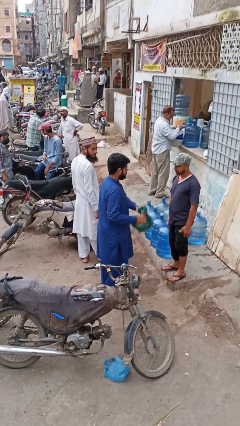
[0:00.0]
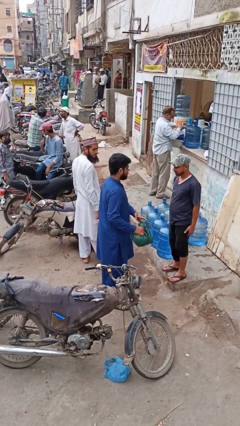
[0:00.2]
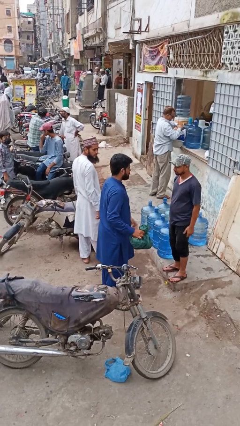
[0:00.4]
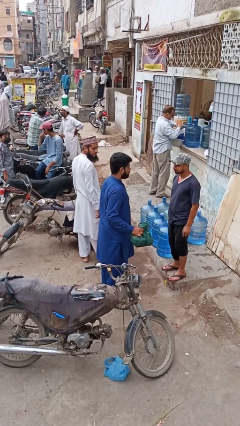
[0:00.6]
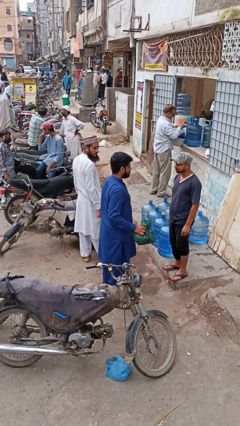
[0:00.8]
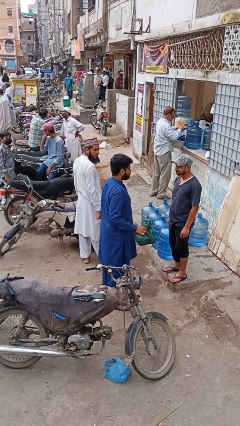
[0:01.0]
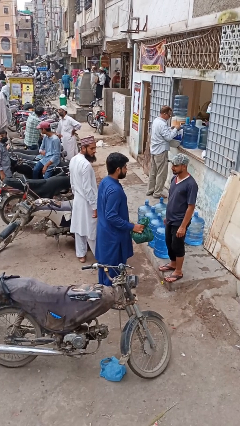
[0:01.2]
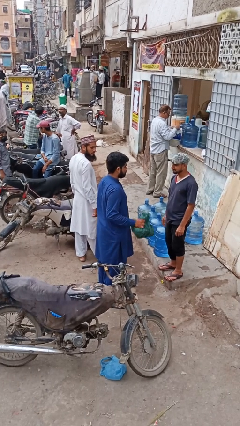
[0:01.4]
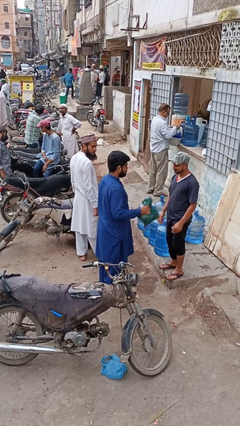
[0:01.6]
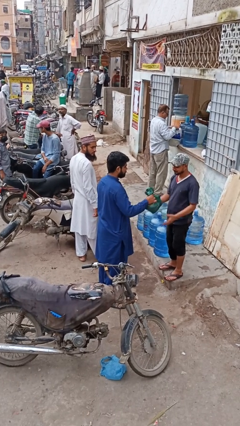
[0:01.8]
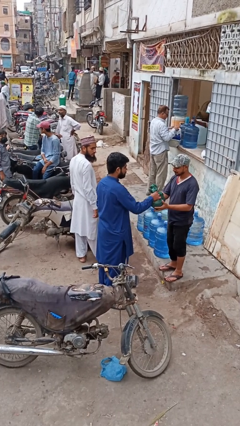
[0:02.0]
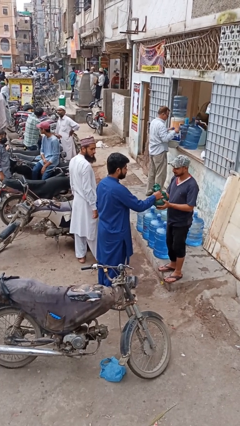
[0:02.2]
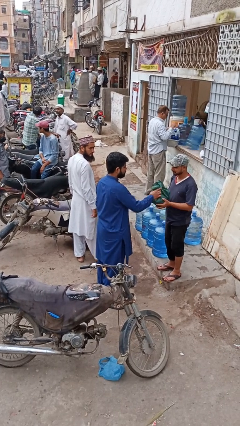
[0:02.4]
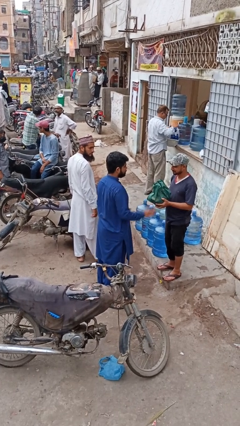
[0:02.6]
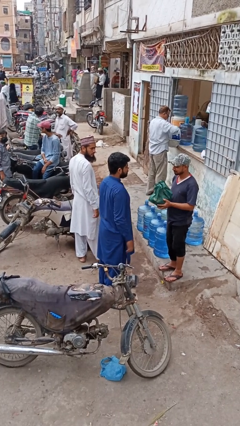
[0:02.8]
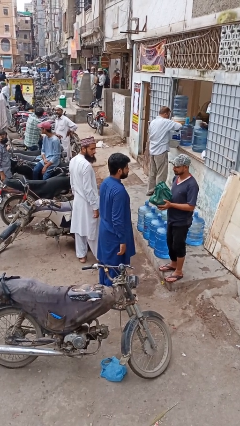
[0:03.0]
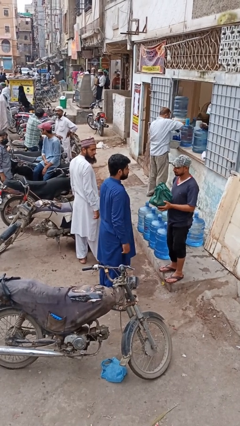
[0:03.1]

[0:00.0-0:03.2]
person transfers object to person

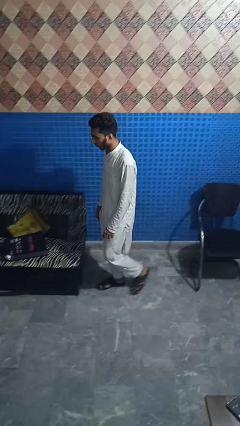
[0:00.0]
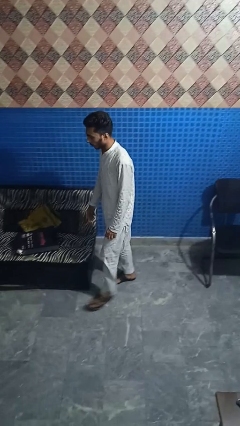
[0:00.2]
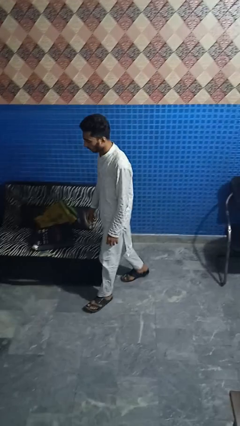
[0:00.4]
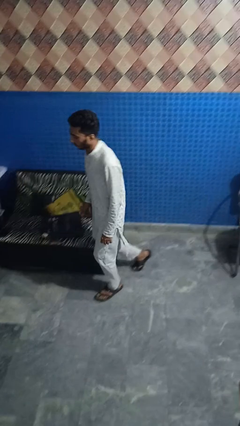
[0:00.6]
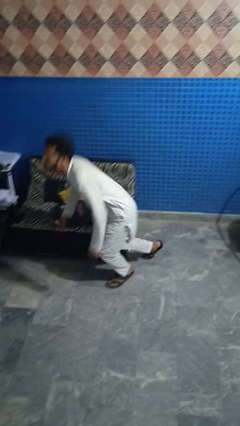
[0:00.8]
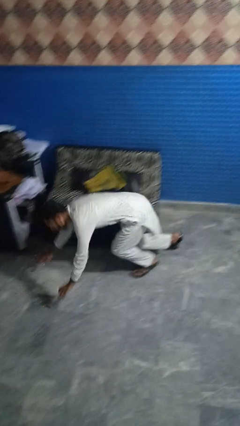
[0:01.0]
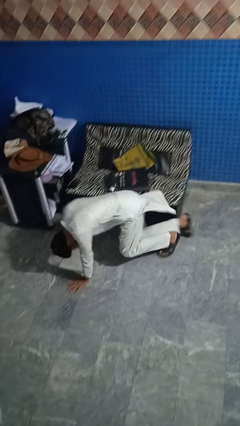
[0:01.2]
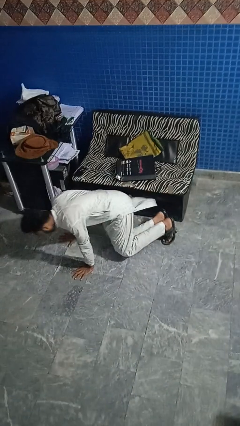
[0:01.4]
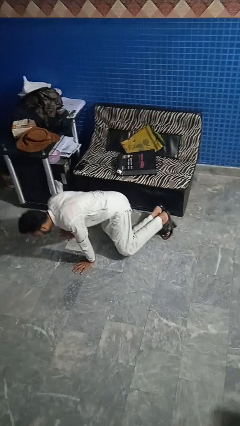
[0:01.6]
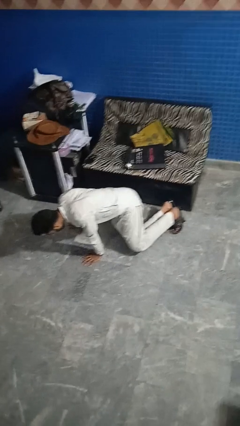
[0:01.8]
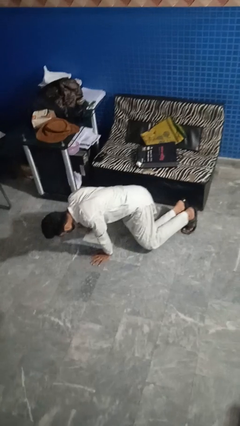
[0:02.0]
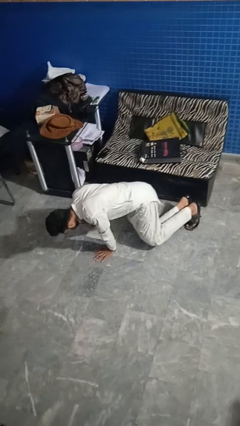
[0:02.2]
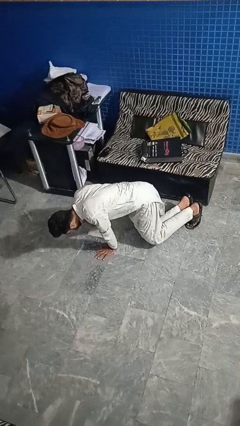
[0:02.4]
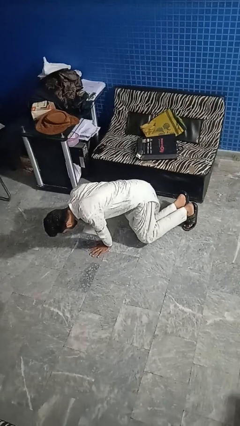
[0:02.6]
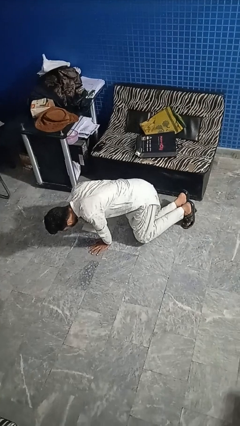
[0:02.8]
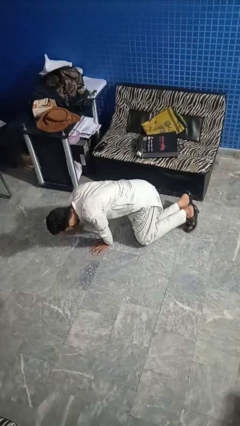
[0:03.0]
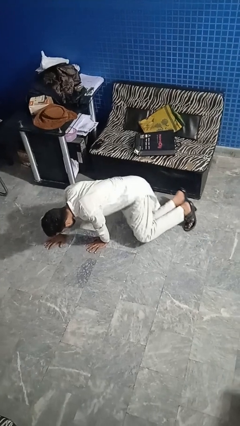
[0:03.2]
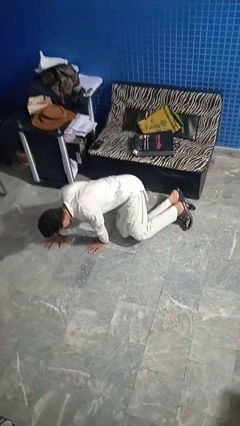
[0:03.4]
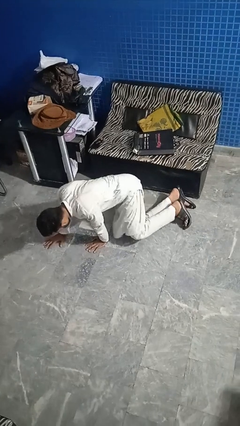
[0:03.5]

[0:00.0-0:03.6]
person trips on object on floor

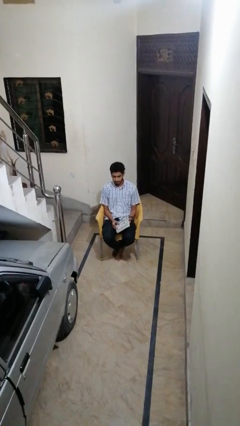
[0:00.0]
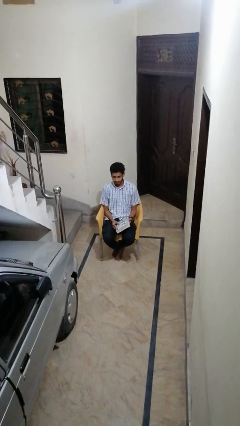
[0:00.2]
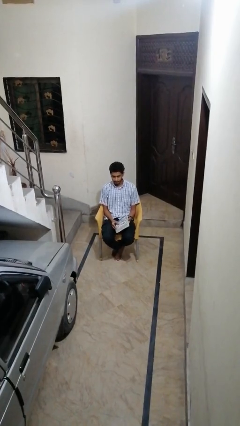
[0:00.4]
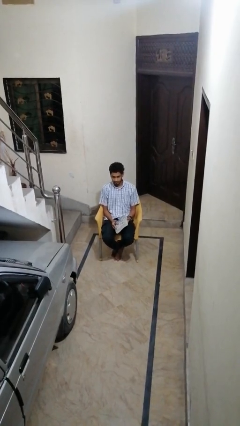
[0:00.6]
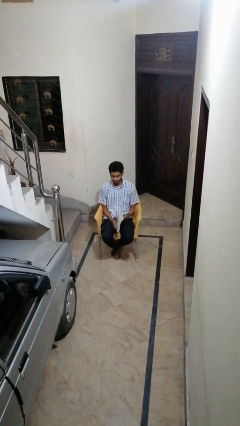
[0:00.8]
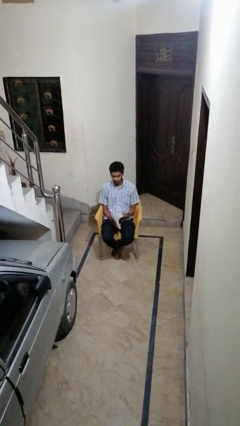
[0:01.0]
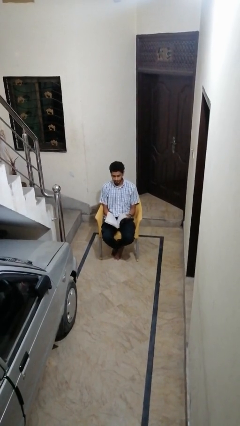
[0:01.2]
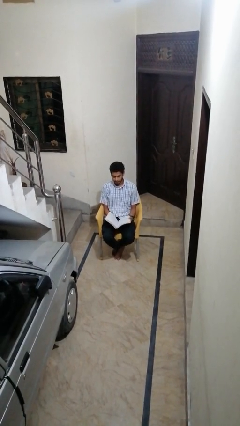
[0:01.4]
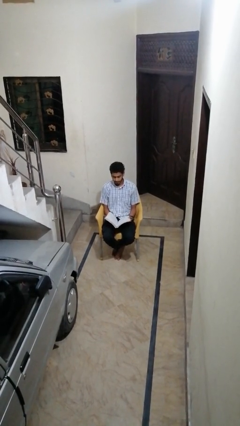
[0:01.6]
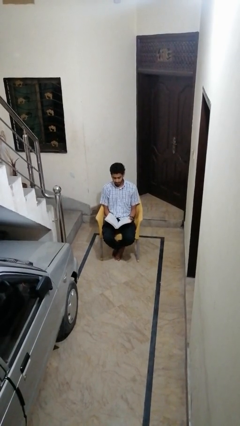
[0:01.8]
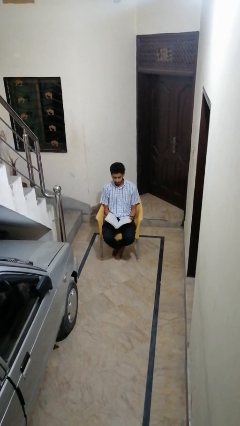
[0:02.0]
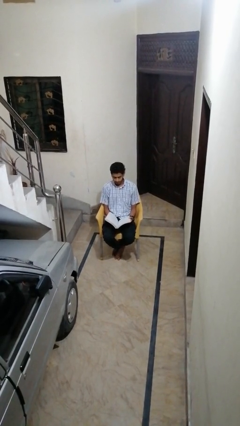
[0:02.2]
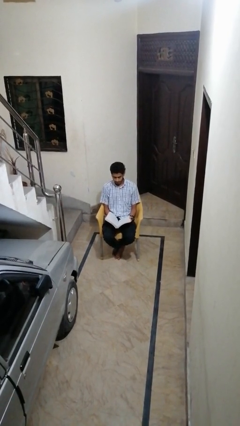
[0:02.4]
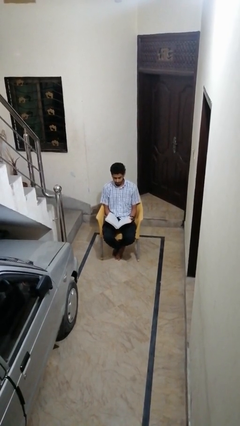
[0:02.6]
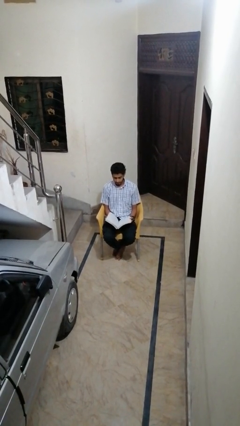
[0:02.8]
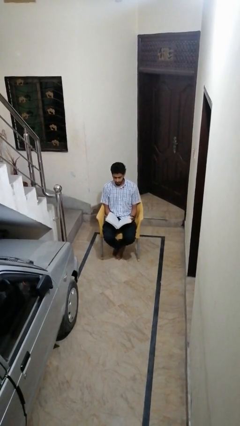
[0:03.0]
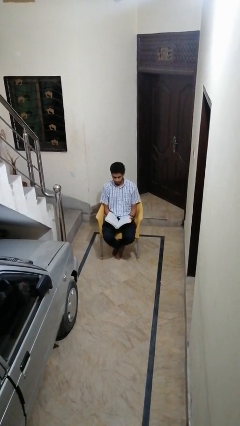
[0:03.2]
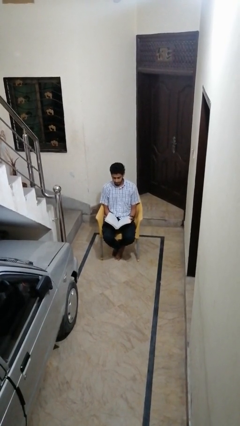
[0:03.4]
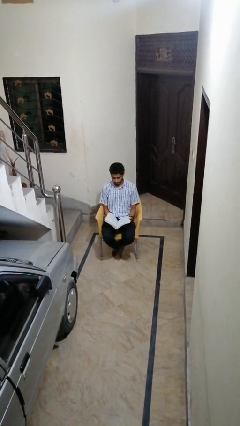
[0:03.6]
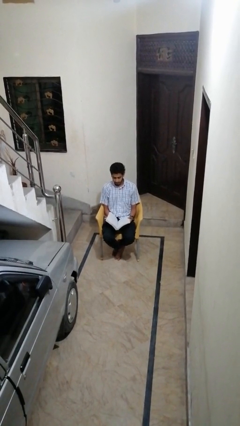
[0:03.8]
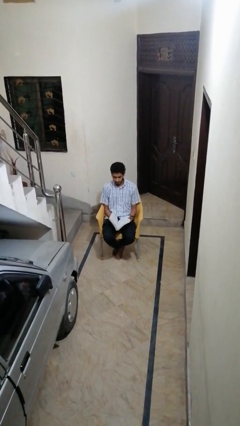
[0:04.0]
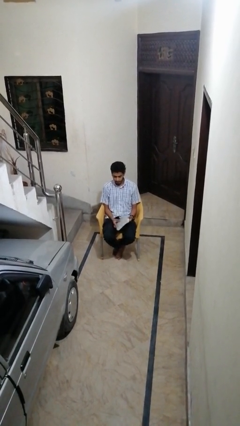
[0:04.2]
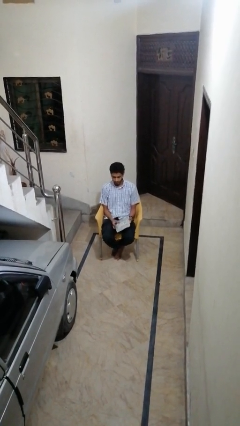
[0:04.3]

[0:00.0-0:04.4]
person reads book

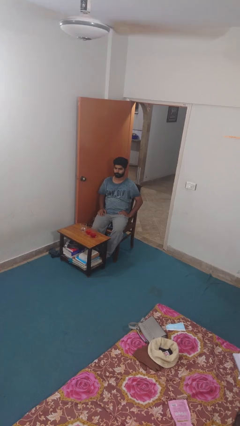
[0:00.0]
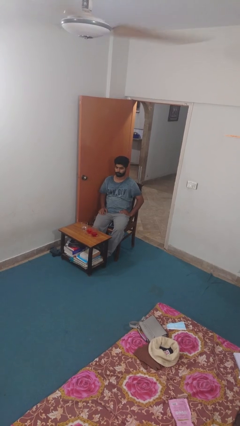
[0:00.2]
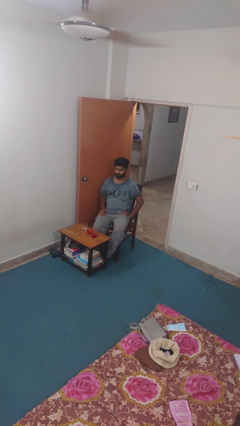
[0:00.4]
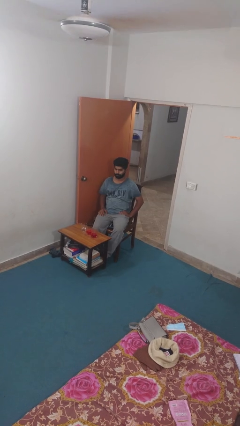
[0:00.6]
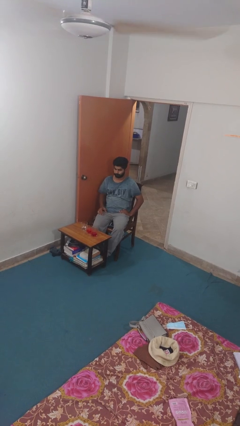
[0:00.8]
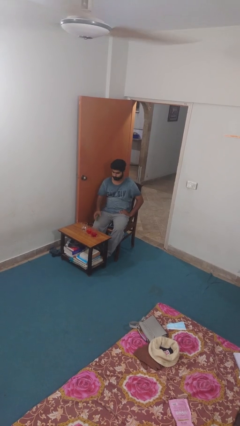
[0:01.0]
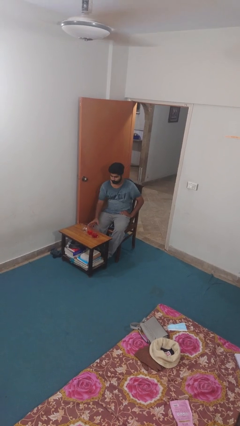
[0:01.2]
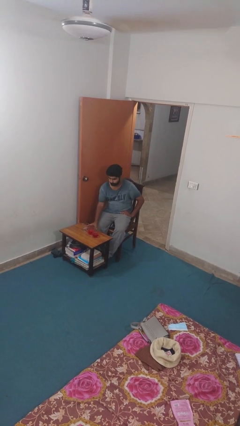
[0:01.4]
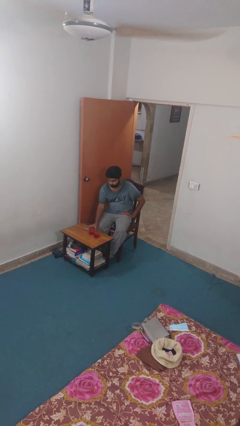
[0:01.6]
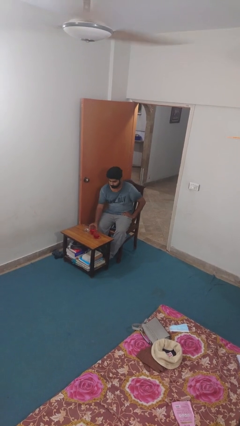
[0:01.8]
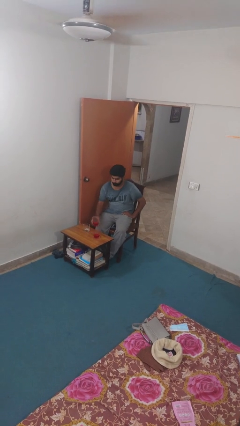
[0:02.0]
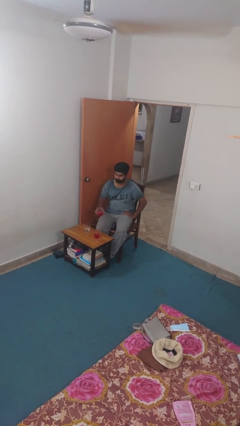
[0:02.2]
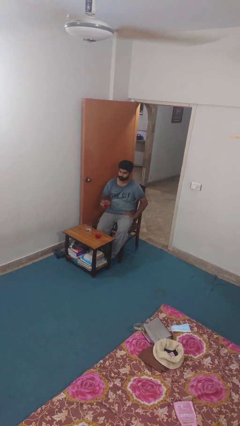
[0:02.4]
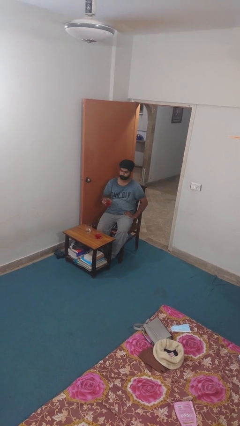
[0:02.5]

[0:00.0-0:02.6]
person picks up object from table

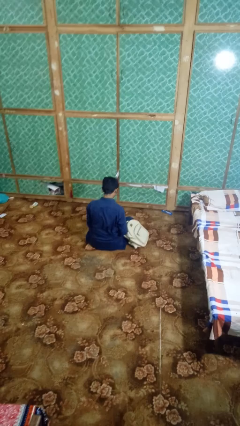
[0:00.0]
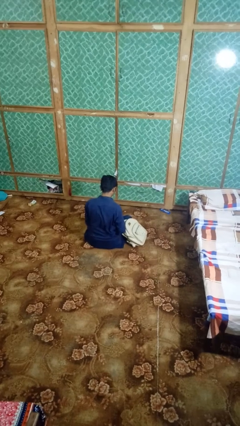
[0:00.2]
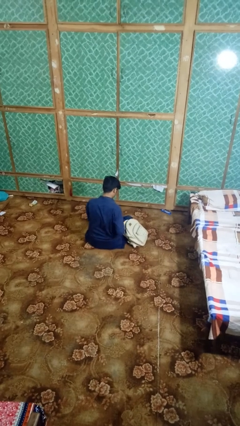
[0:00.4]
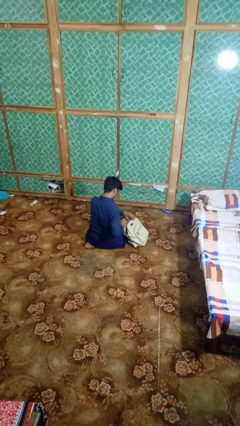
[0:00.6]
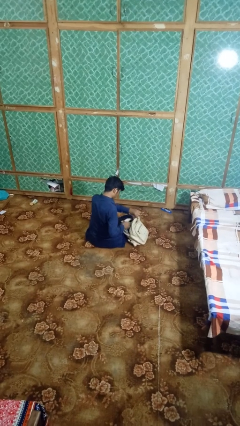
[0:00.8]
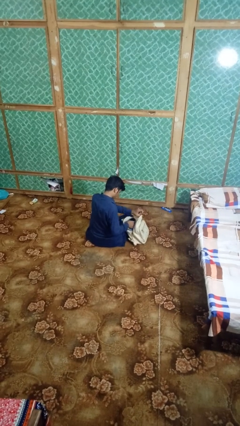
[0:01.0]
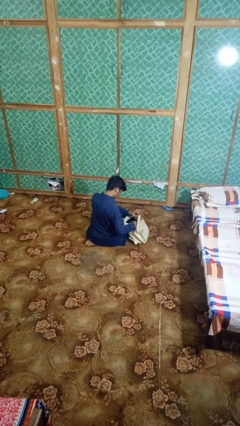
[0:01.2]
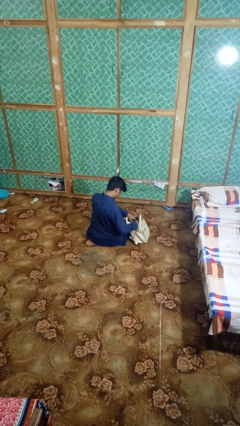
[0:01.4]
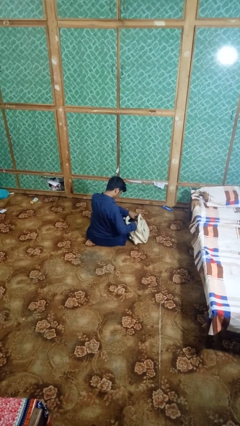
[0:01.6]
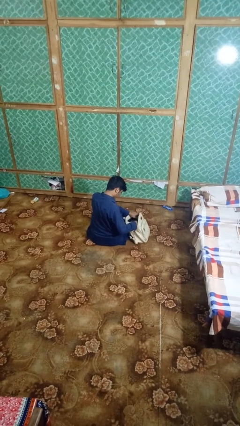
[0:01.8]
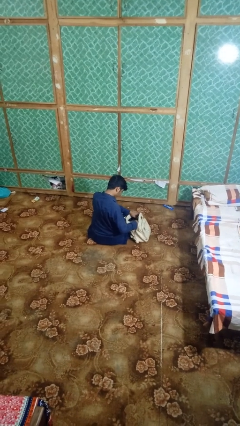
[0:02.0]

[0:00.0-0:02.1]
person searches in backpack

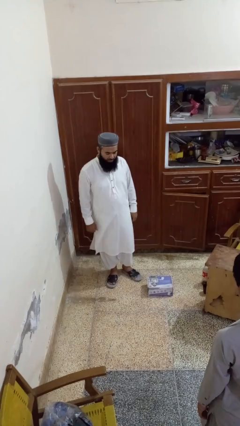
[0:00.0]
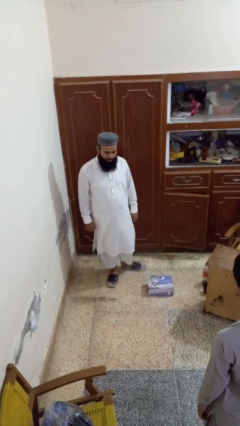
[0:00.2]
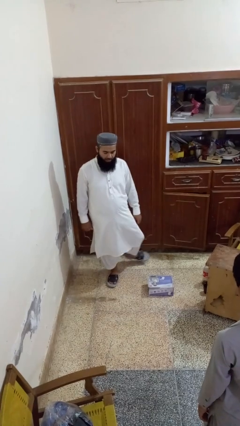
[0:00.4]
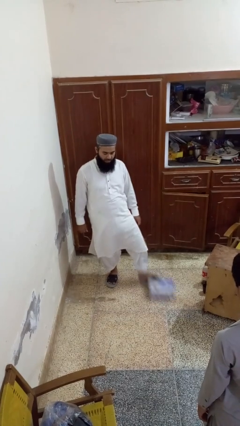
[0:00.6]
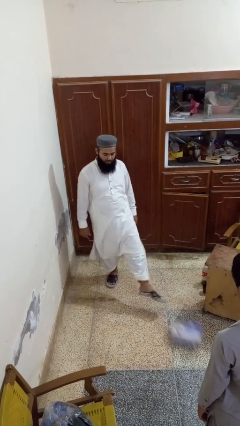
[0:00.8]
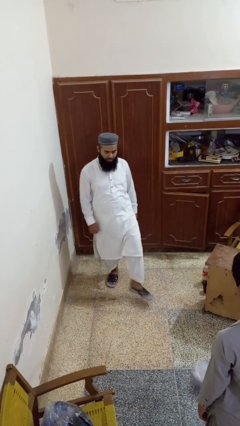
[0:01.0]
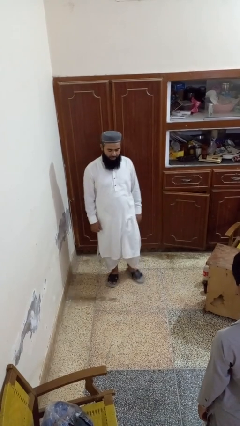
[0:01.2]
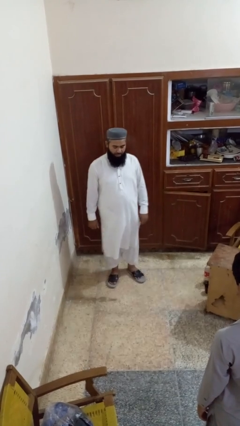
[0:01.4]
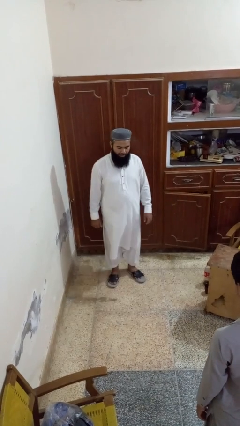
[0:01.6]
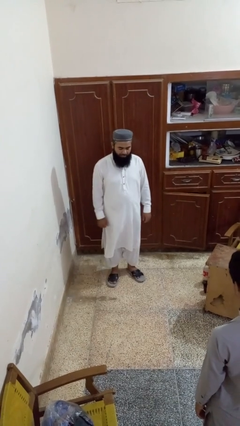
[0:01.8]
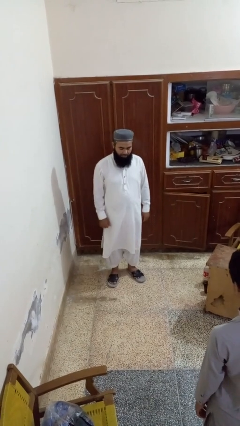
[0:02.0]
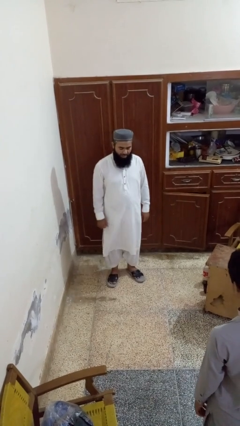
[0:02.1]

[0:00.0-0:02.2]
person kicks object to person
